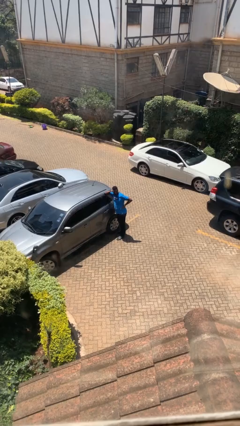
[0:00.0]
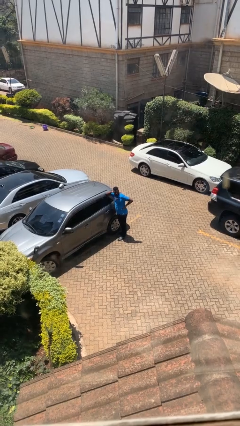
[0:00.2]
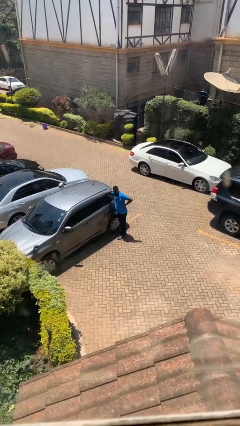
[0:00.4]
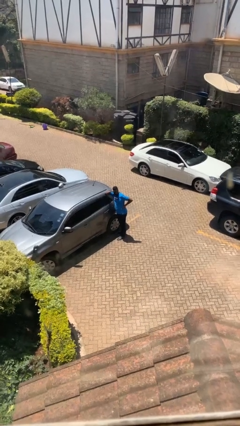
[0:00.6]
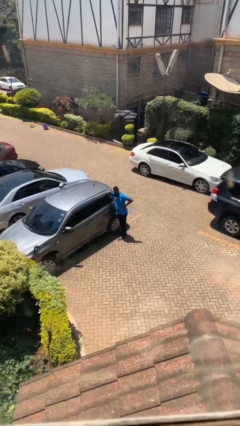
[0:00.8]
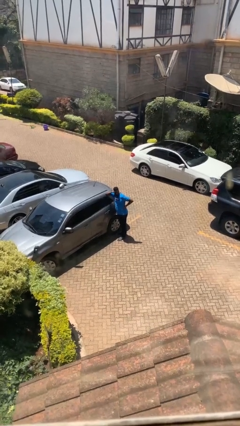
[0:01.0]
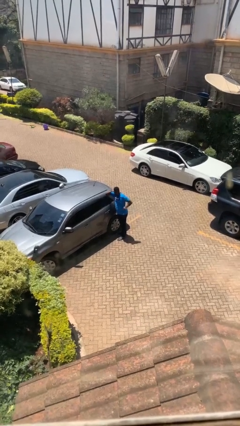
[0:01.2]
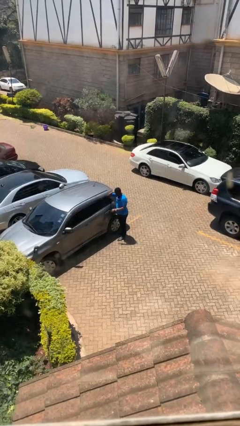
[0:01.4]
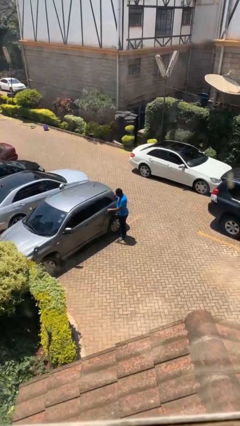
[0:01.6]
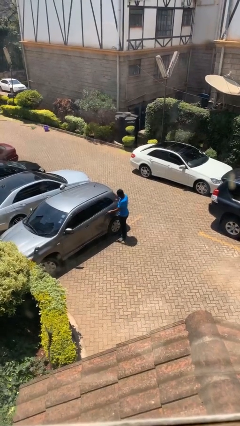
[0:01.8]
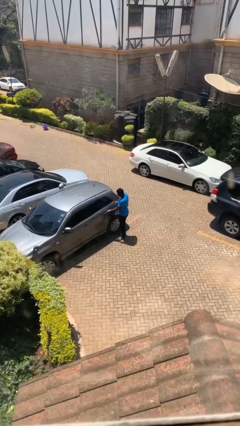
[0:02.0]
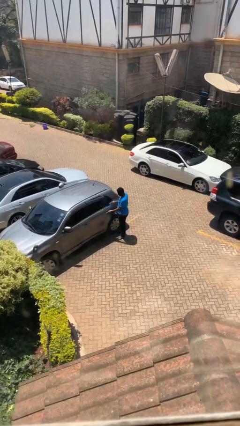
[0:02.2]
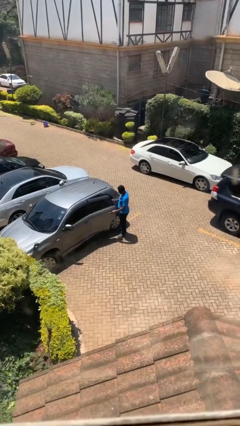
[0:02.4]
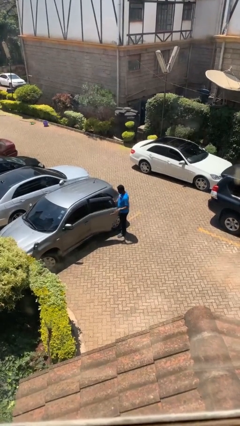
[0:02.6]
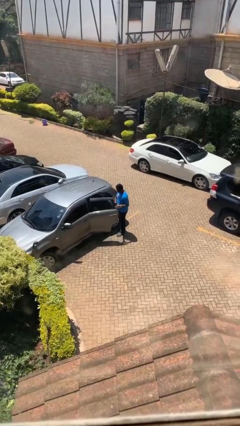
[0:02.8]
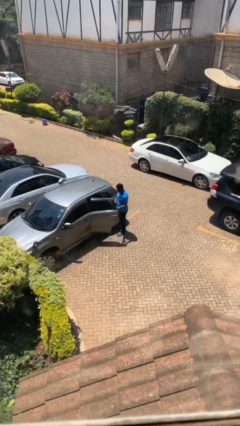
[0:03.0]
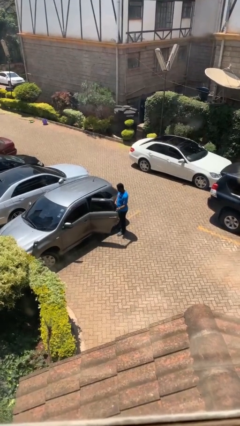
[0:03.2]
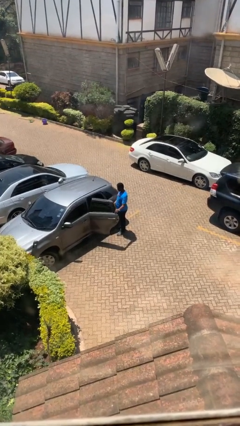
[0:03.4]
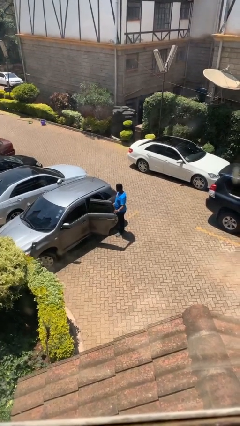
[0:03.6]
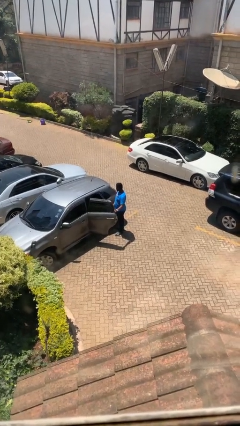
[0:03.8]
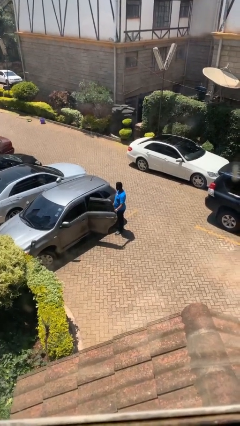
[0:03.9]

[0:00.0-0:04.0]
person opens car door

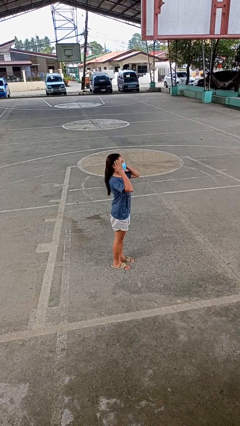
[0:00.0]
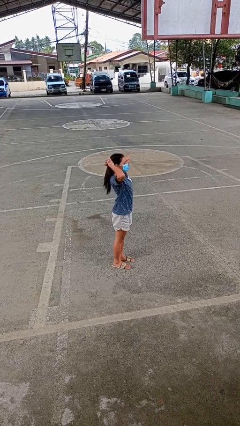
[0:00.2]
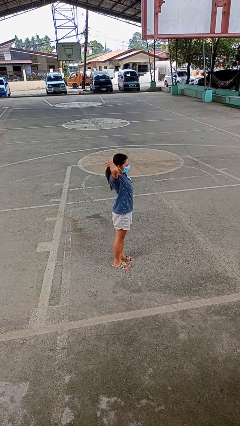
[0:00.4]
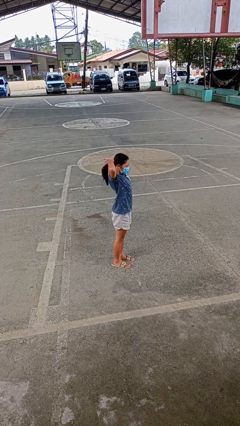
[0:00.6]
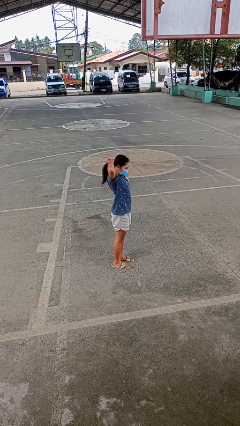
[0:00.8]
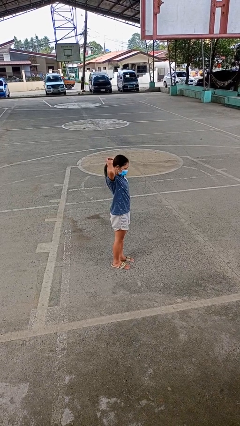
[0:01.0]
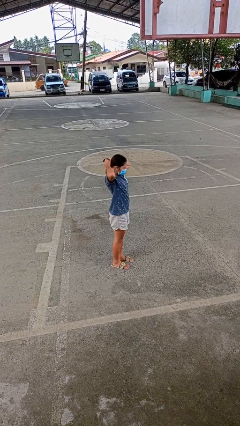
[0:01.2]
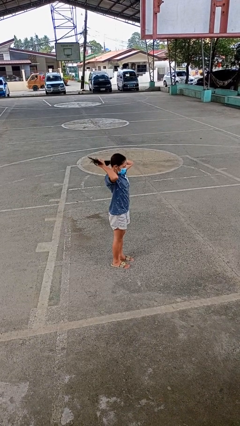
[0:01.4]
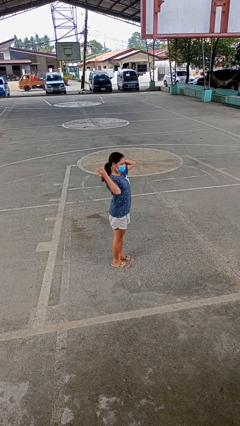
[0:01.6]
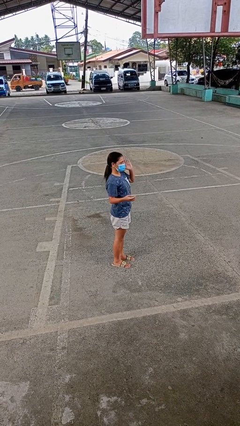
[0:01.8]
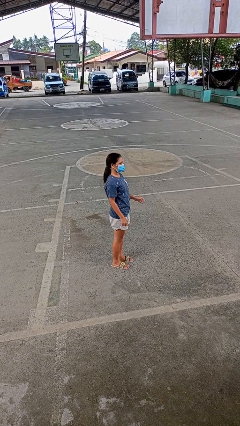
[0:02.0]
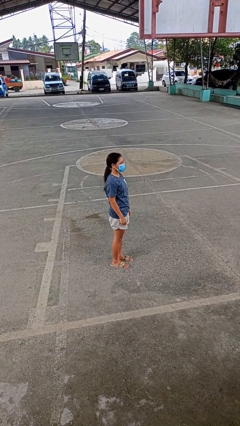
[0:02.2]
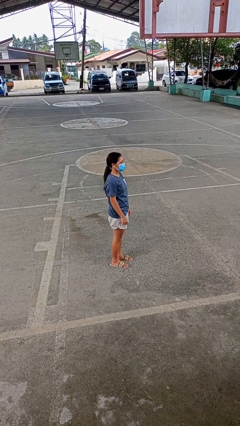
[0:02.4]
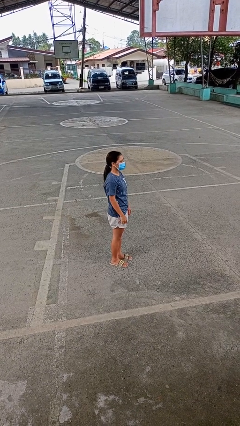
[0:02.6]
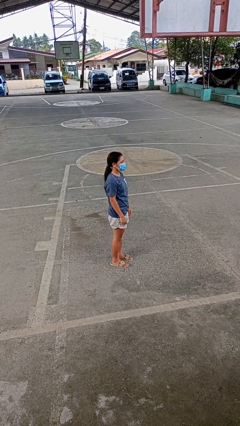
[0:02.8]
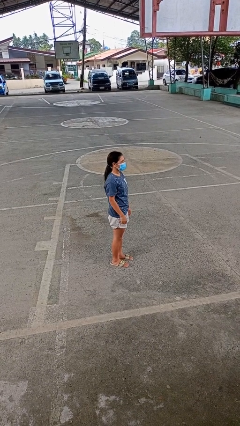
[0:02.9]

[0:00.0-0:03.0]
person puts hair in ponytail

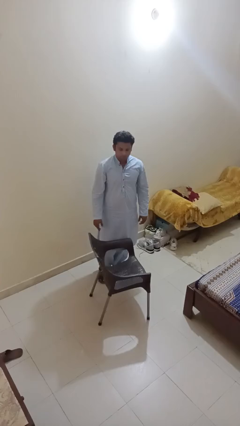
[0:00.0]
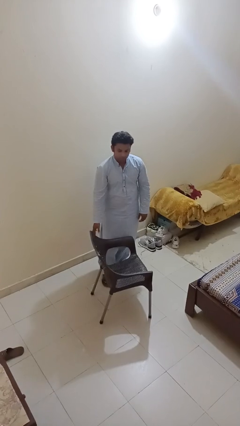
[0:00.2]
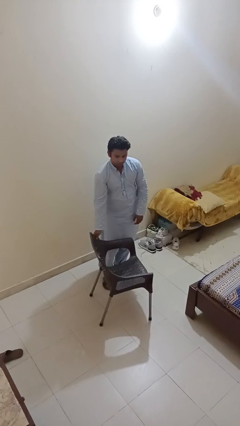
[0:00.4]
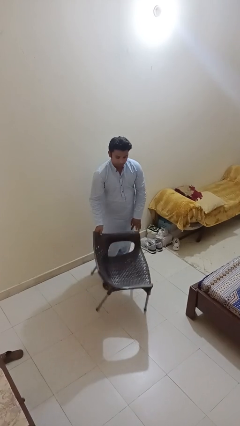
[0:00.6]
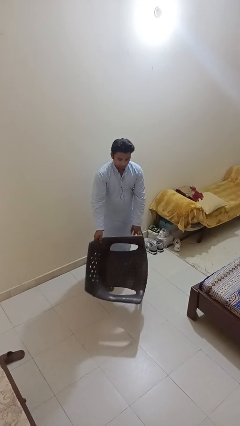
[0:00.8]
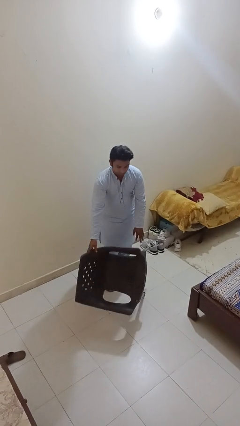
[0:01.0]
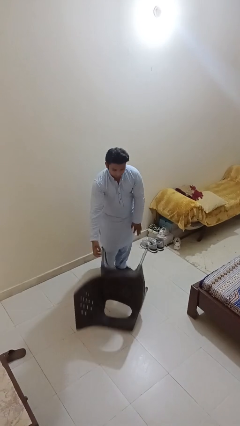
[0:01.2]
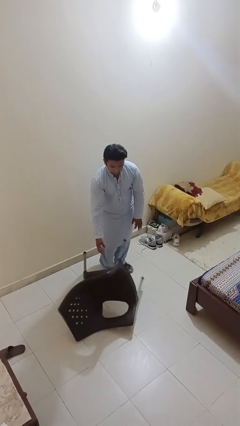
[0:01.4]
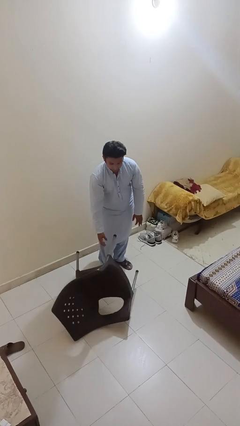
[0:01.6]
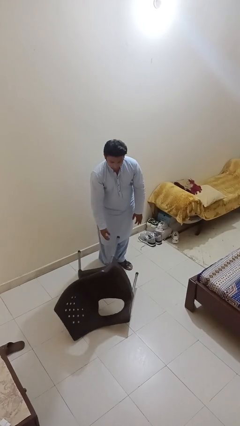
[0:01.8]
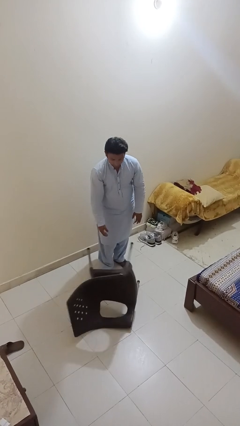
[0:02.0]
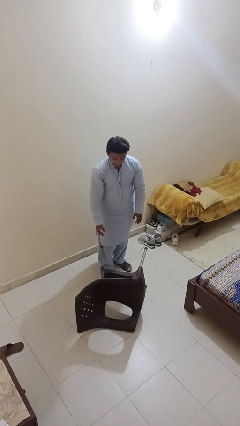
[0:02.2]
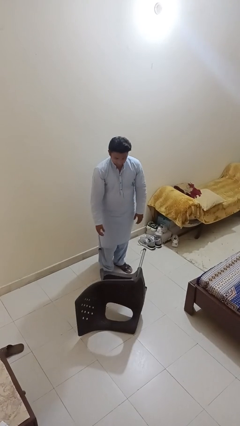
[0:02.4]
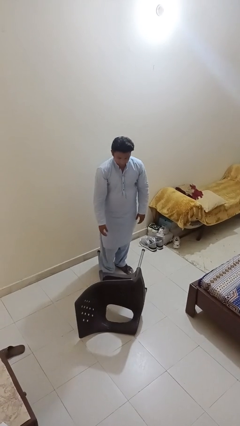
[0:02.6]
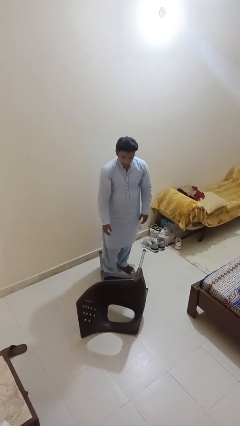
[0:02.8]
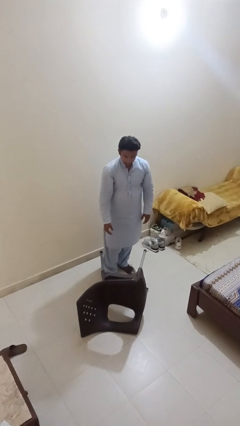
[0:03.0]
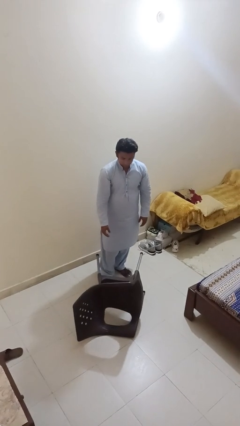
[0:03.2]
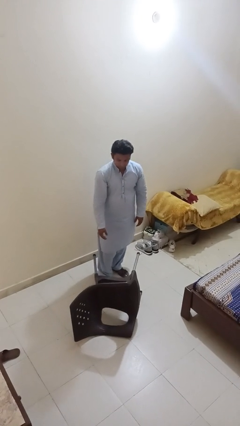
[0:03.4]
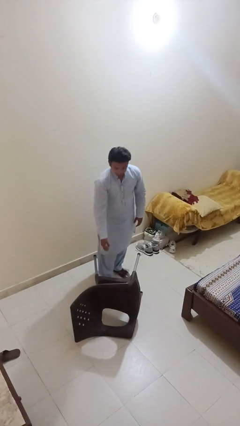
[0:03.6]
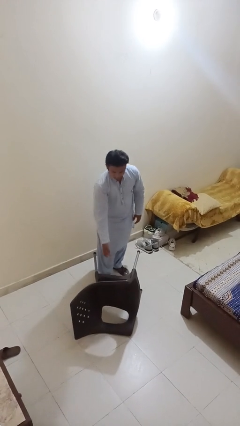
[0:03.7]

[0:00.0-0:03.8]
person knocks over furniture

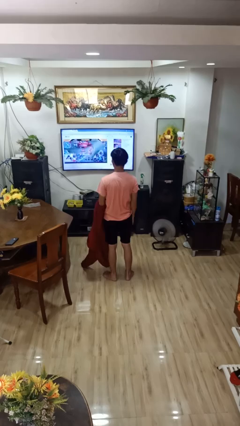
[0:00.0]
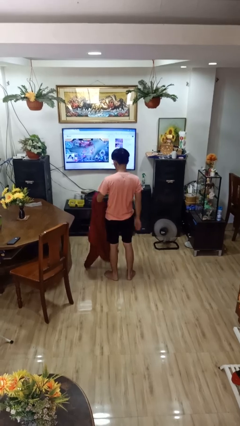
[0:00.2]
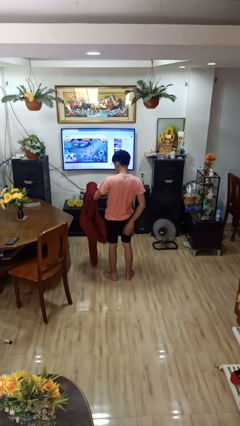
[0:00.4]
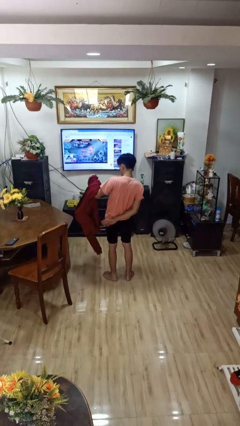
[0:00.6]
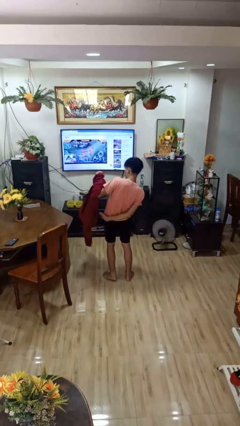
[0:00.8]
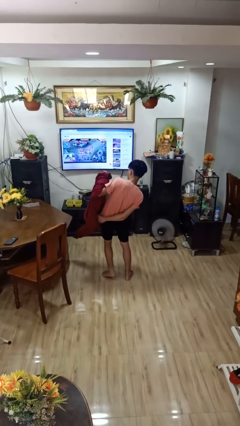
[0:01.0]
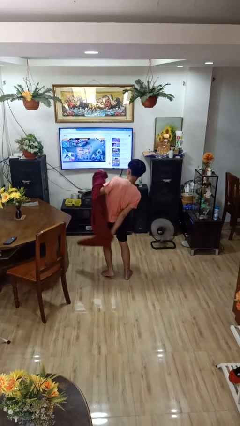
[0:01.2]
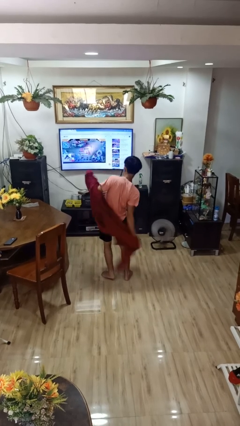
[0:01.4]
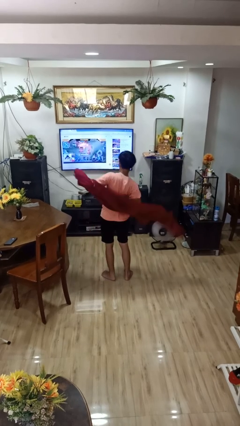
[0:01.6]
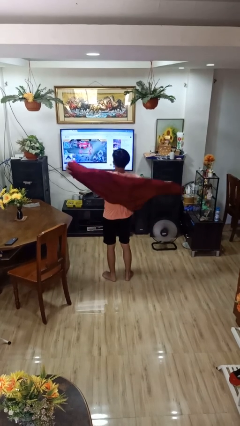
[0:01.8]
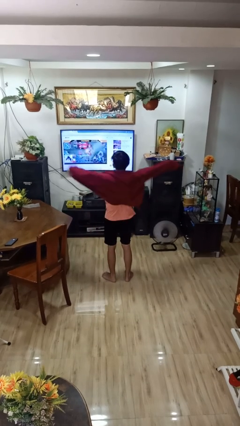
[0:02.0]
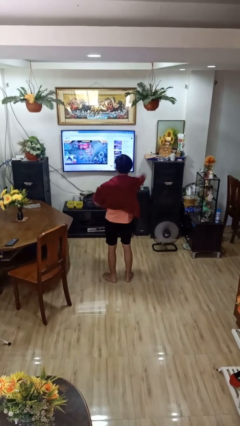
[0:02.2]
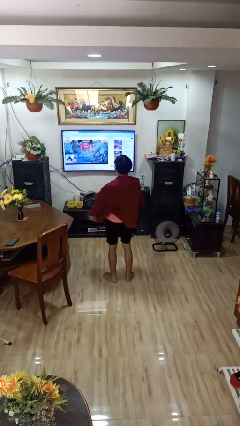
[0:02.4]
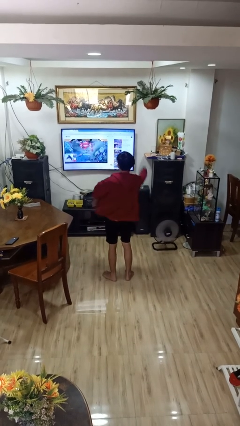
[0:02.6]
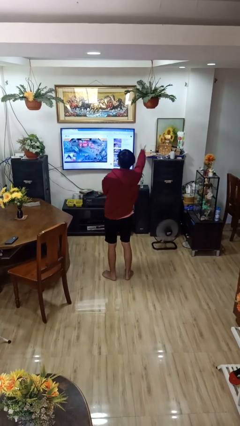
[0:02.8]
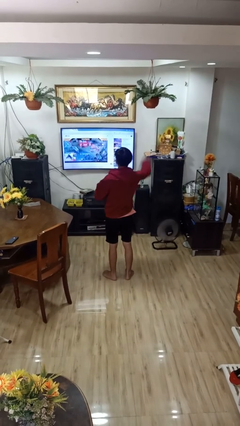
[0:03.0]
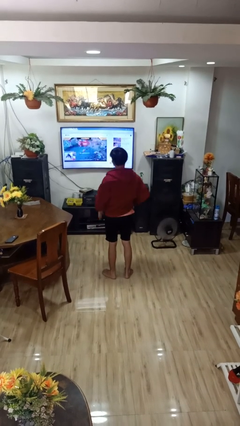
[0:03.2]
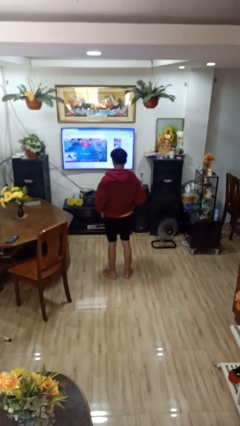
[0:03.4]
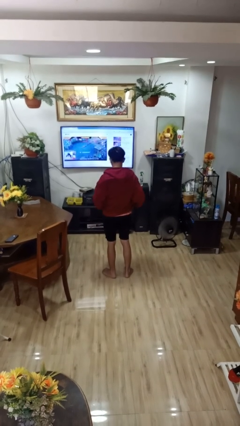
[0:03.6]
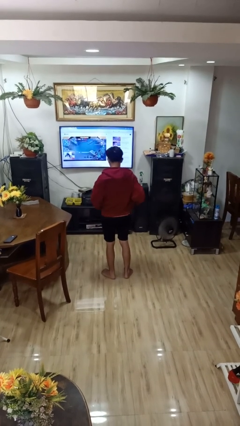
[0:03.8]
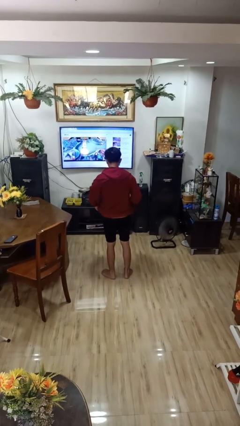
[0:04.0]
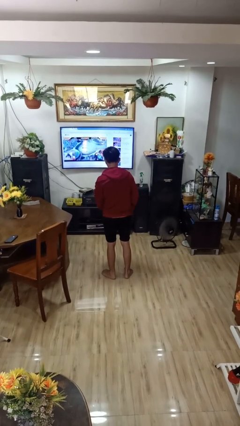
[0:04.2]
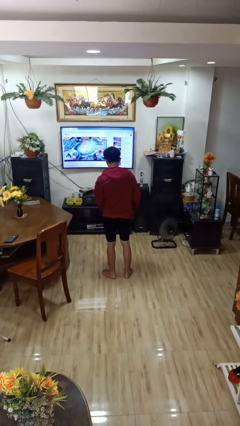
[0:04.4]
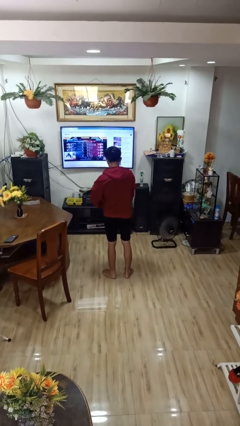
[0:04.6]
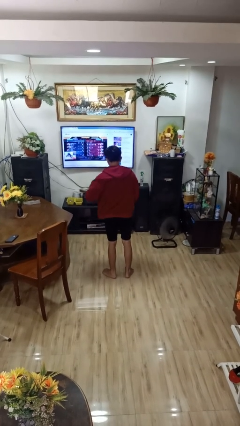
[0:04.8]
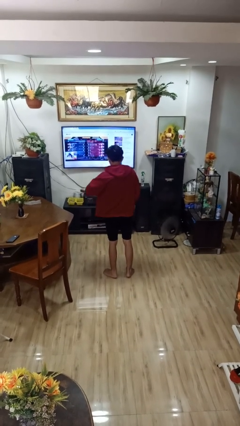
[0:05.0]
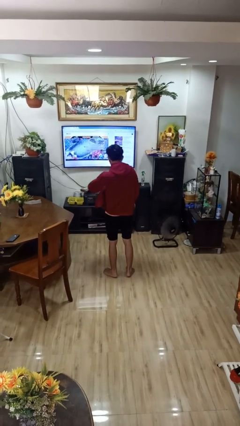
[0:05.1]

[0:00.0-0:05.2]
person puts on jacket

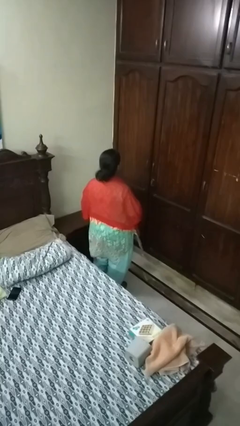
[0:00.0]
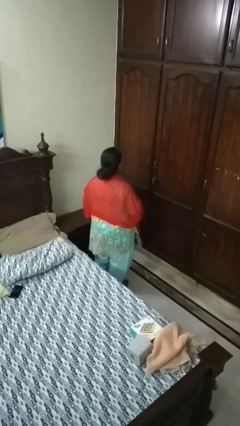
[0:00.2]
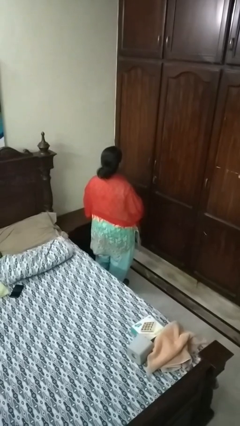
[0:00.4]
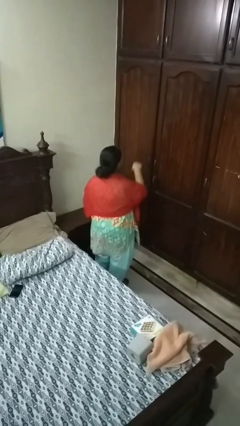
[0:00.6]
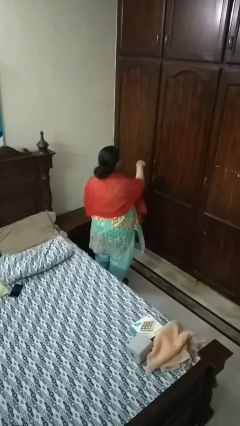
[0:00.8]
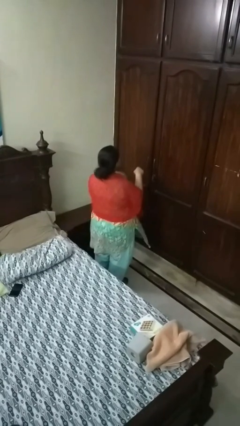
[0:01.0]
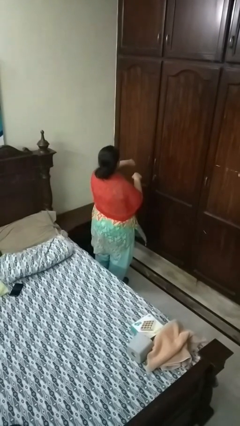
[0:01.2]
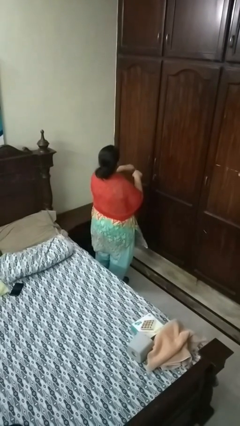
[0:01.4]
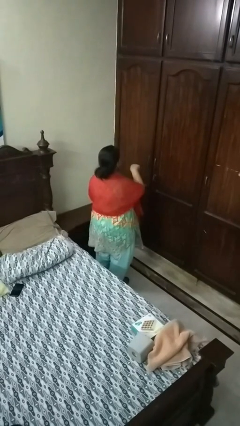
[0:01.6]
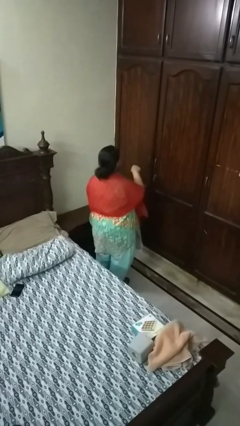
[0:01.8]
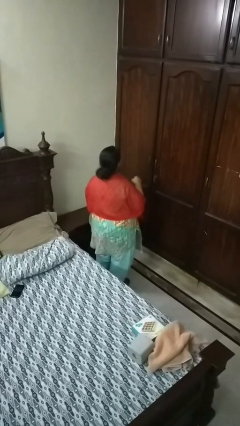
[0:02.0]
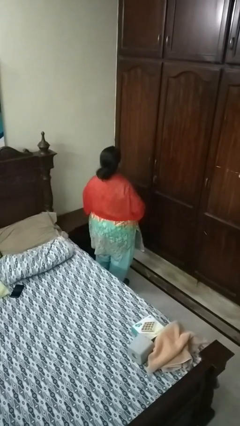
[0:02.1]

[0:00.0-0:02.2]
person punches
